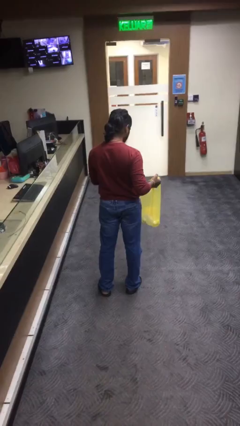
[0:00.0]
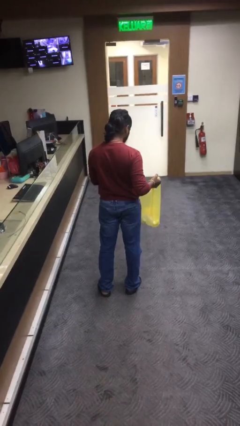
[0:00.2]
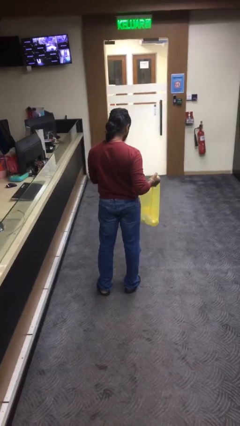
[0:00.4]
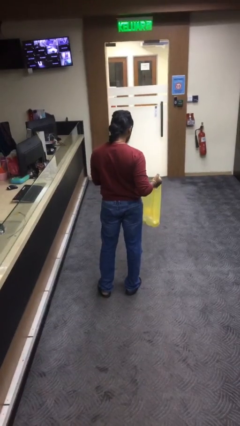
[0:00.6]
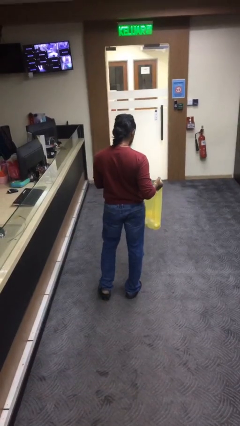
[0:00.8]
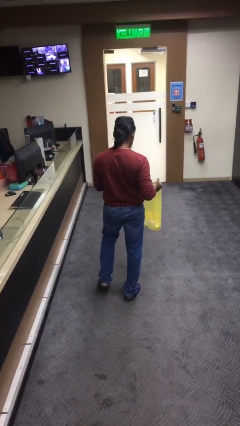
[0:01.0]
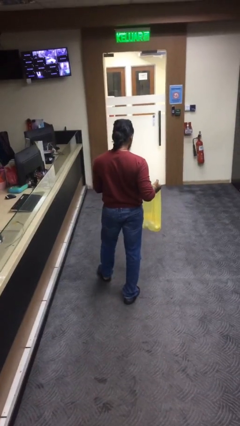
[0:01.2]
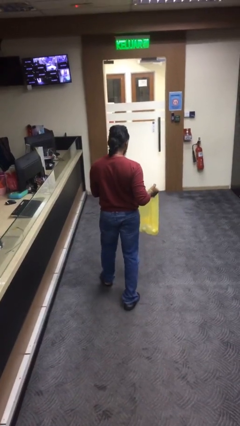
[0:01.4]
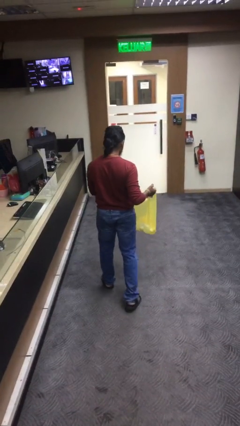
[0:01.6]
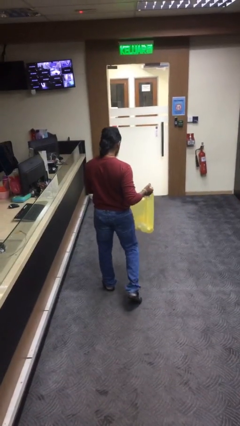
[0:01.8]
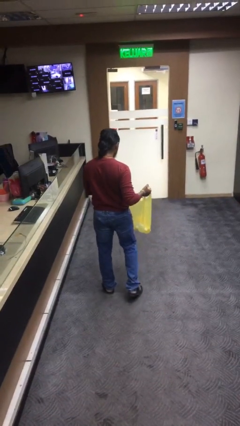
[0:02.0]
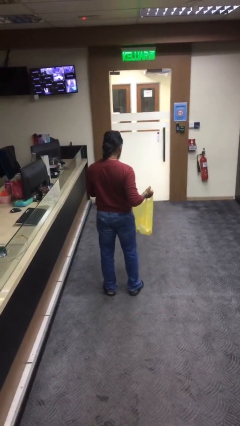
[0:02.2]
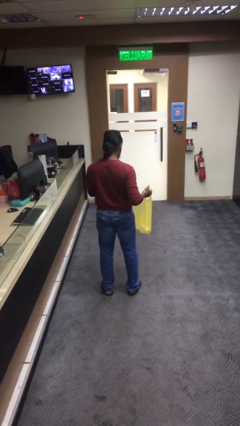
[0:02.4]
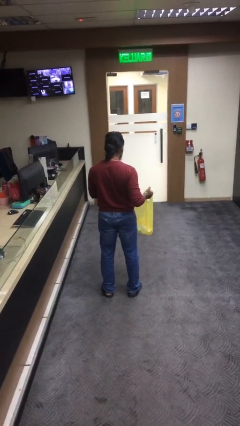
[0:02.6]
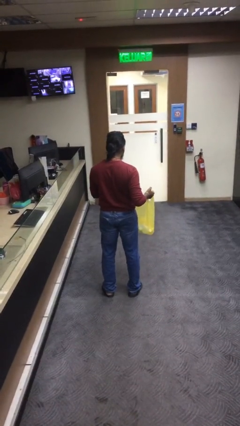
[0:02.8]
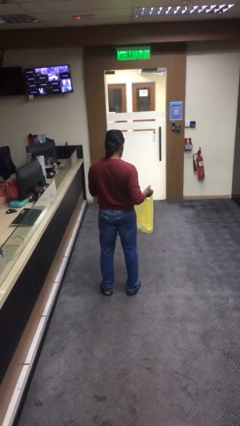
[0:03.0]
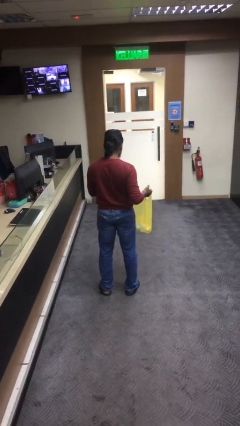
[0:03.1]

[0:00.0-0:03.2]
person carries groceries

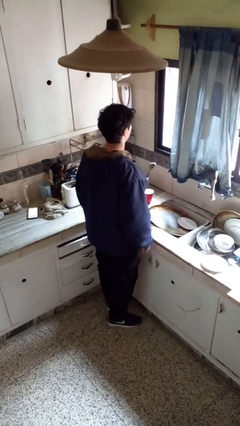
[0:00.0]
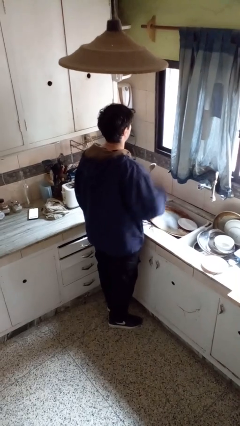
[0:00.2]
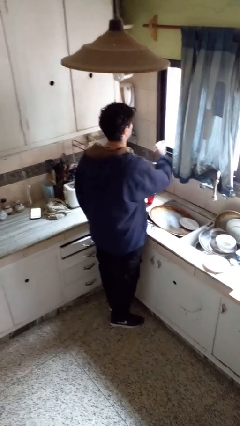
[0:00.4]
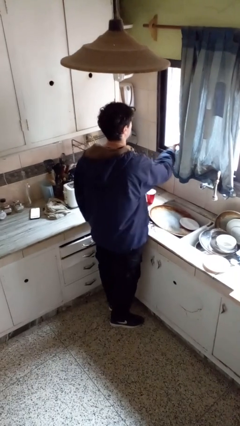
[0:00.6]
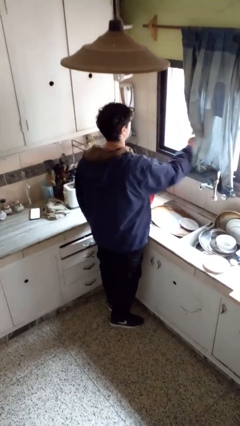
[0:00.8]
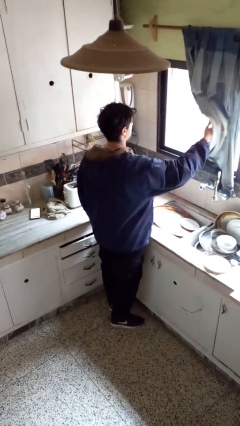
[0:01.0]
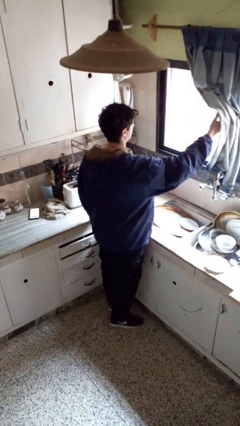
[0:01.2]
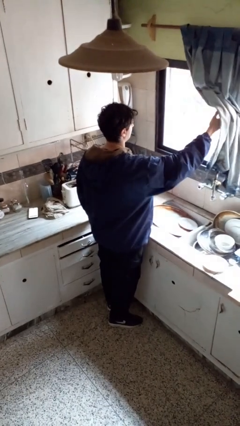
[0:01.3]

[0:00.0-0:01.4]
person opens curtains

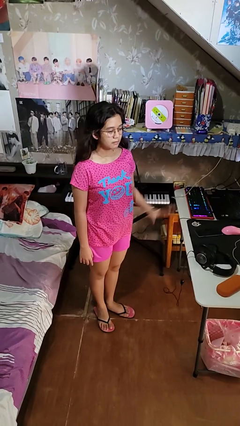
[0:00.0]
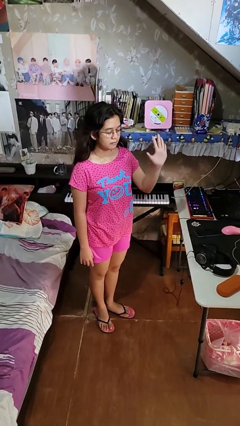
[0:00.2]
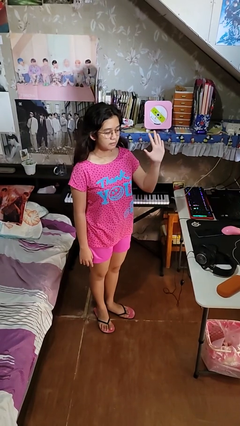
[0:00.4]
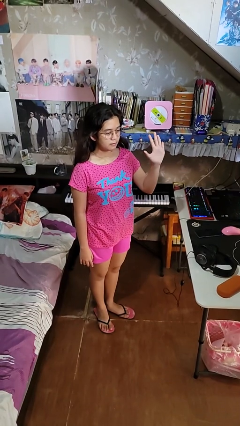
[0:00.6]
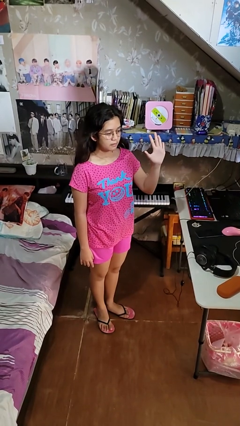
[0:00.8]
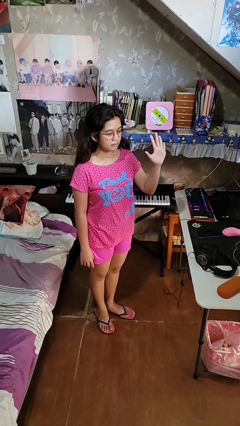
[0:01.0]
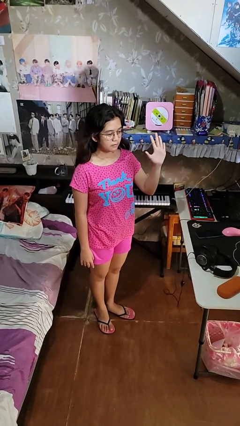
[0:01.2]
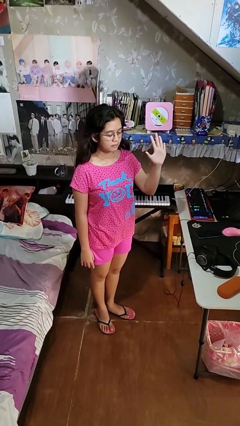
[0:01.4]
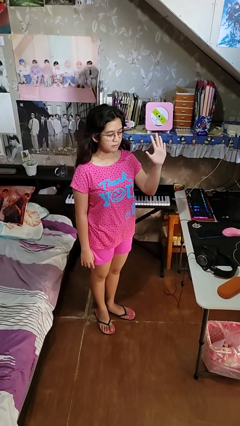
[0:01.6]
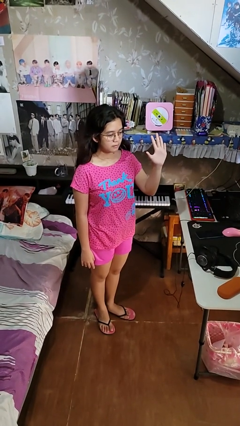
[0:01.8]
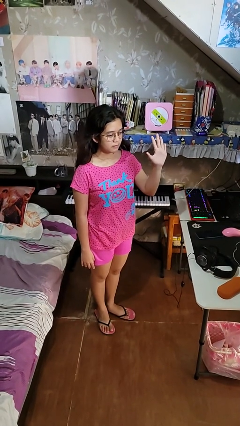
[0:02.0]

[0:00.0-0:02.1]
person gestures number five

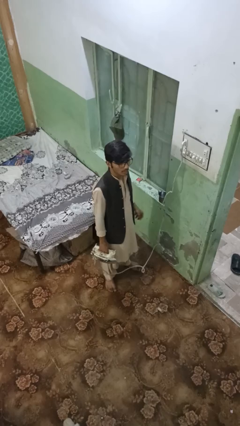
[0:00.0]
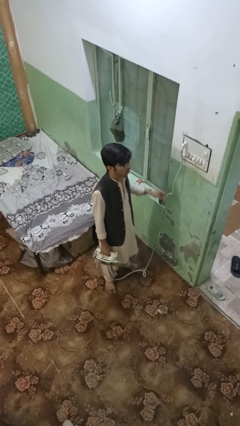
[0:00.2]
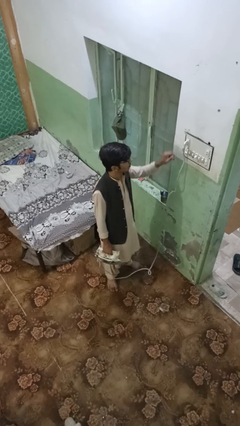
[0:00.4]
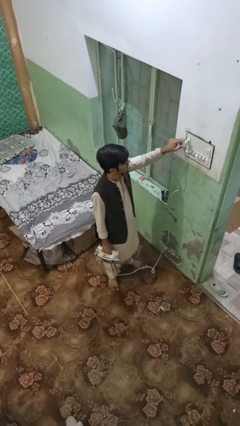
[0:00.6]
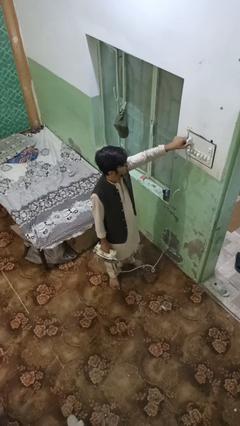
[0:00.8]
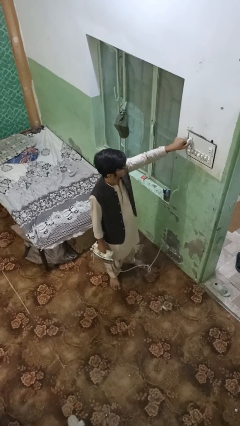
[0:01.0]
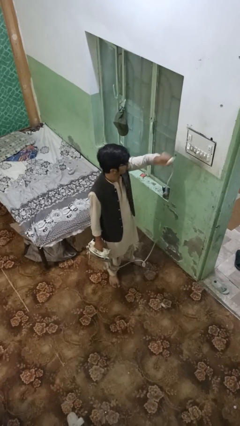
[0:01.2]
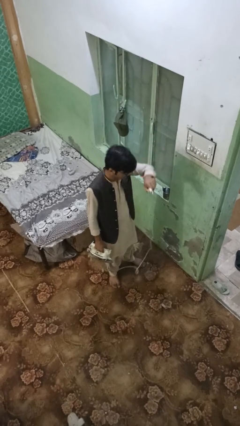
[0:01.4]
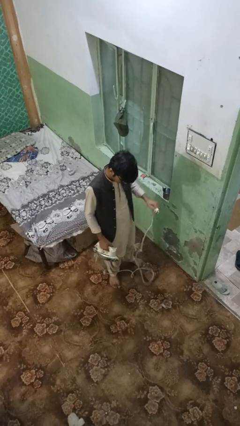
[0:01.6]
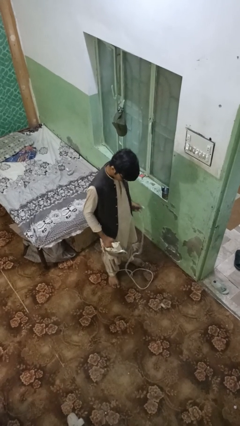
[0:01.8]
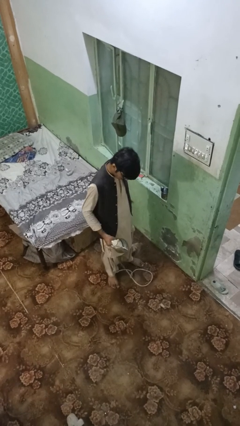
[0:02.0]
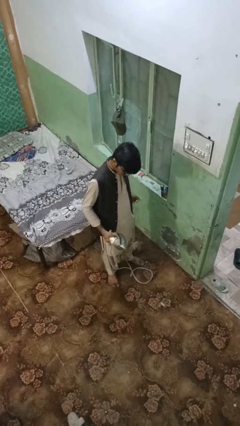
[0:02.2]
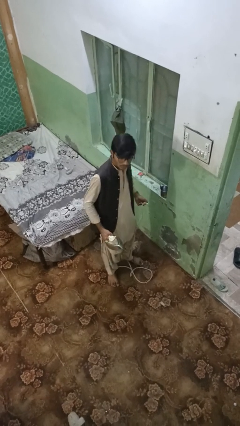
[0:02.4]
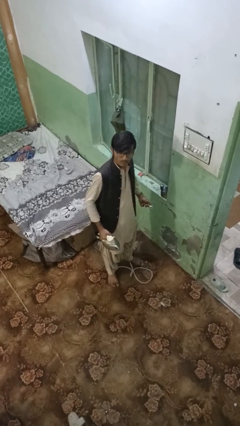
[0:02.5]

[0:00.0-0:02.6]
person unplugs from electrical socket

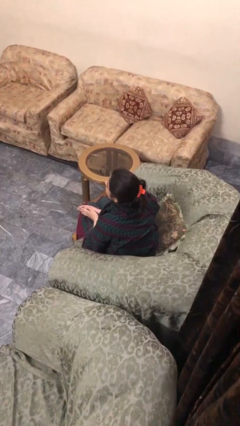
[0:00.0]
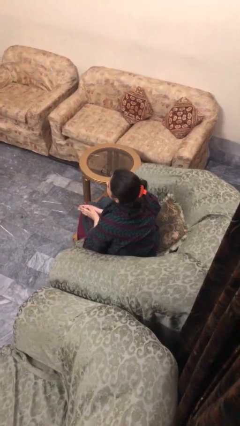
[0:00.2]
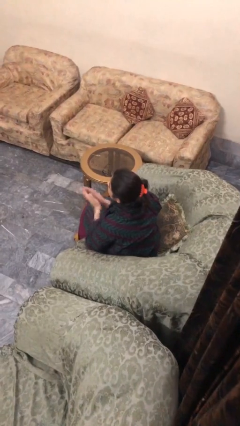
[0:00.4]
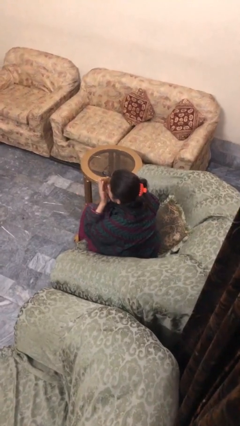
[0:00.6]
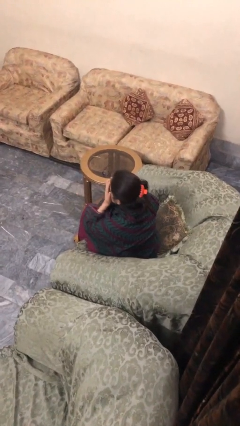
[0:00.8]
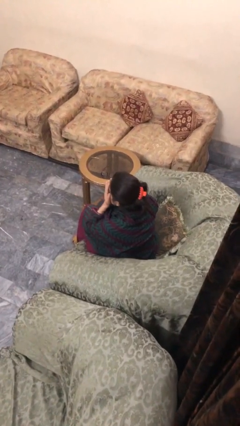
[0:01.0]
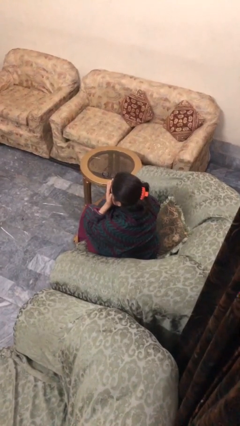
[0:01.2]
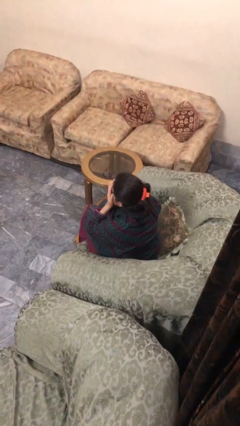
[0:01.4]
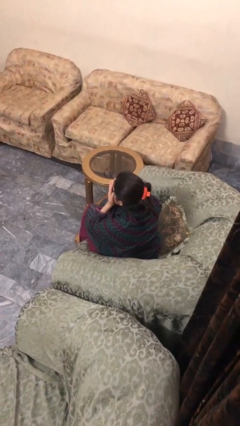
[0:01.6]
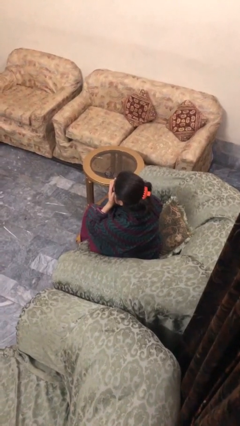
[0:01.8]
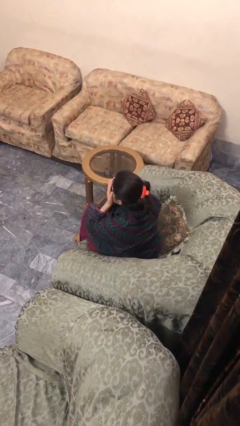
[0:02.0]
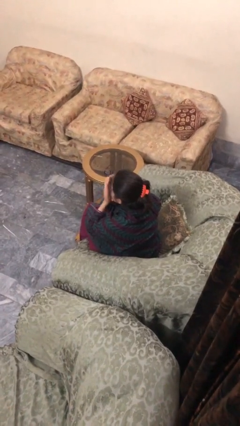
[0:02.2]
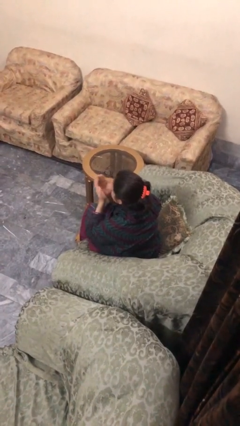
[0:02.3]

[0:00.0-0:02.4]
person covers face with hands

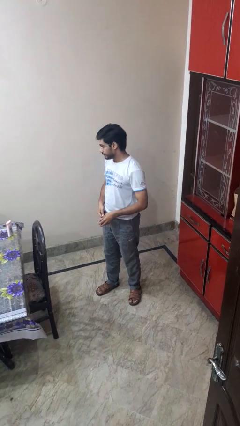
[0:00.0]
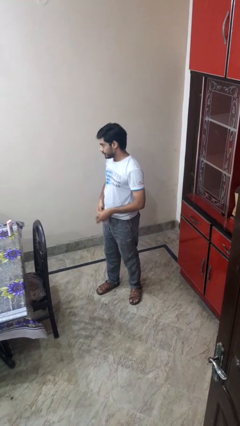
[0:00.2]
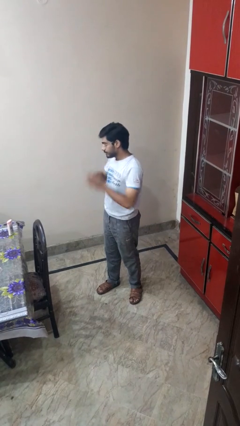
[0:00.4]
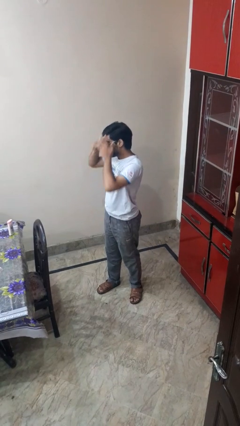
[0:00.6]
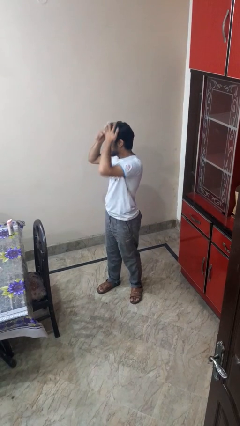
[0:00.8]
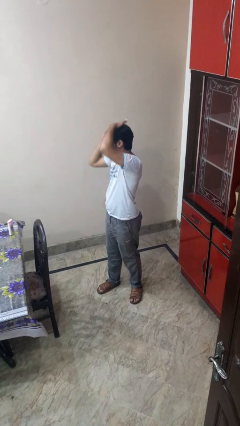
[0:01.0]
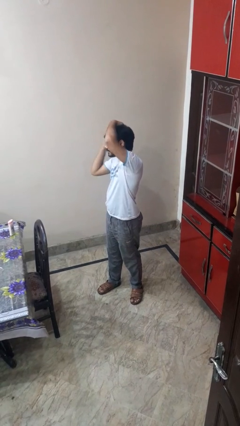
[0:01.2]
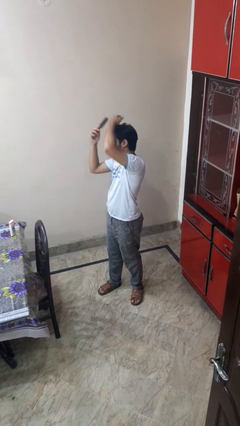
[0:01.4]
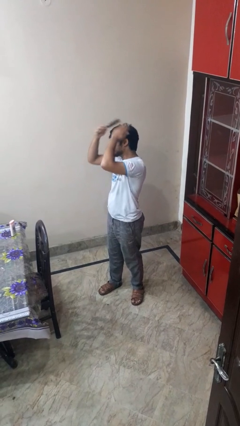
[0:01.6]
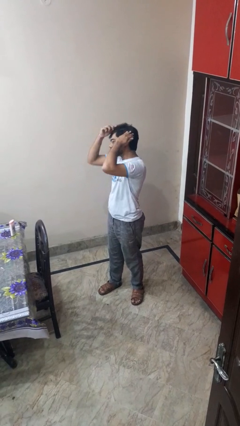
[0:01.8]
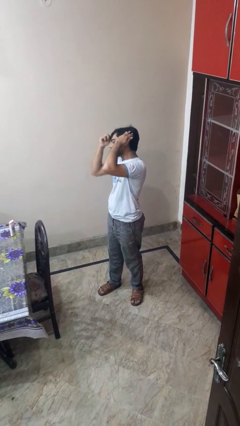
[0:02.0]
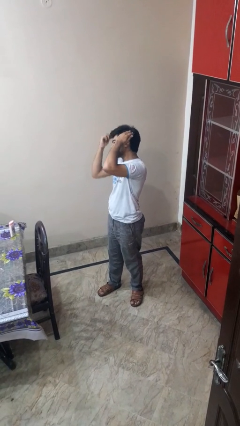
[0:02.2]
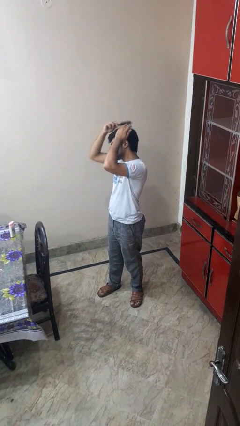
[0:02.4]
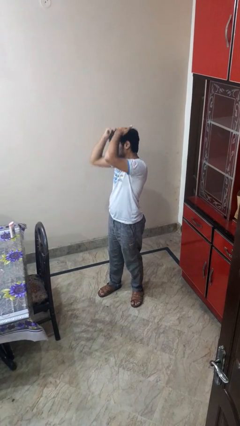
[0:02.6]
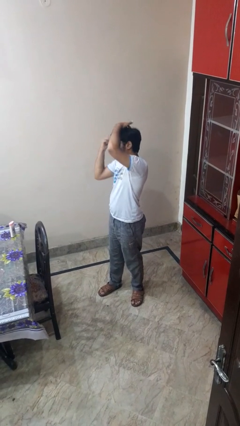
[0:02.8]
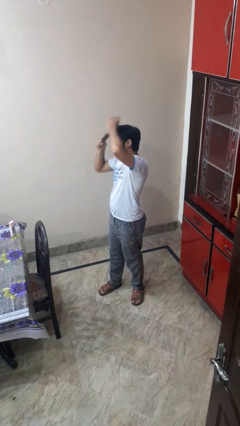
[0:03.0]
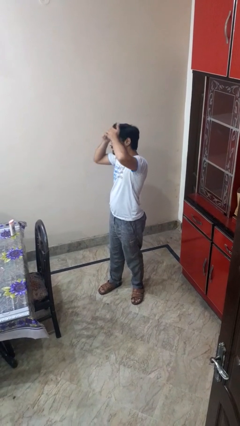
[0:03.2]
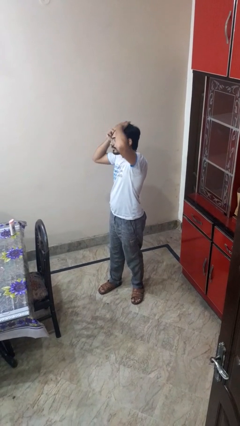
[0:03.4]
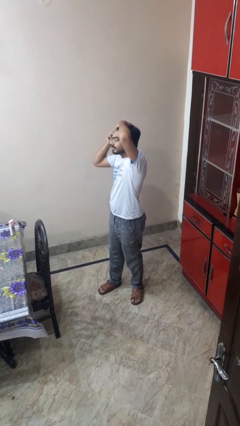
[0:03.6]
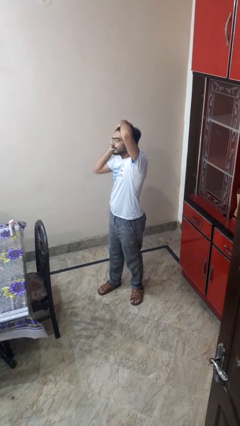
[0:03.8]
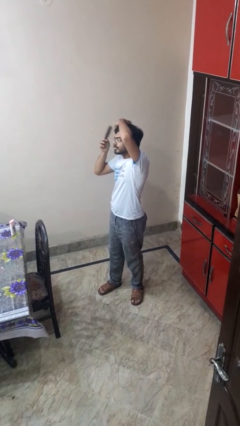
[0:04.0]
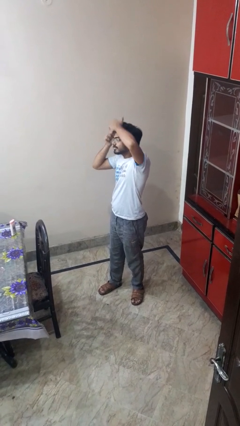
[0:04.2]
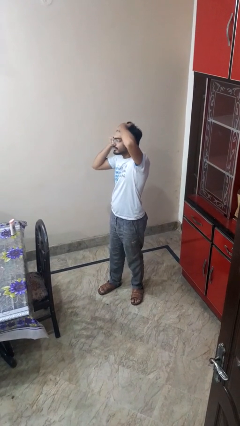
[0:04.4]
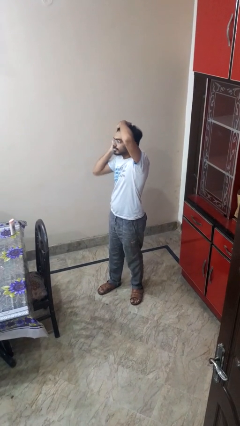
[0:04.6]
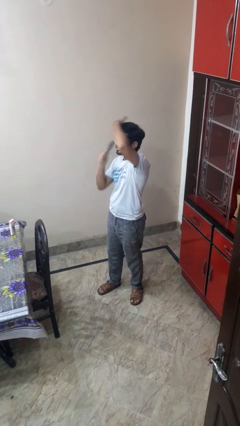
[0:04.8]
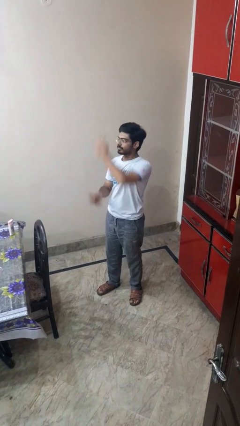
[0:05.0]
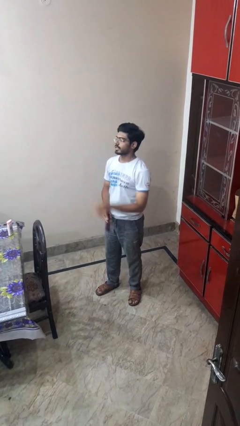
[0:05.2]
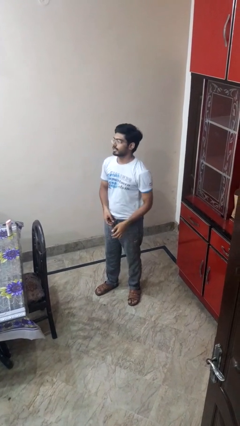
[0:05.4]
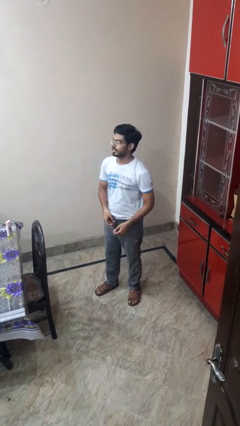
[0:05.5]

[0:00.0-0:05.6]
person brushes hair

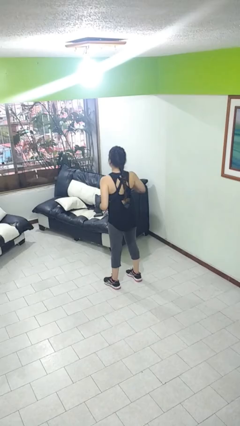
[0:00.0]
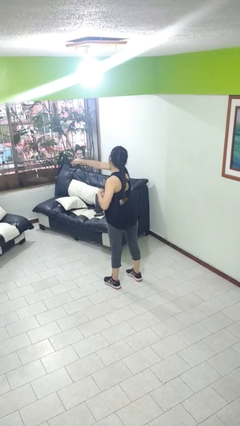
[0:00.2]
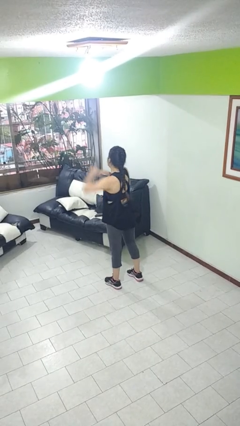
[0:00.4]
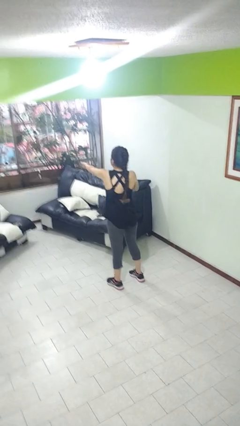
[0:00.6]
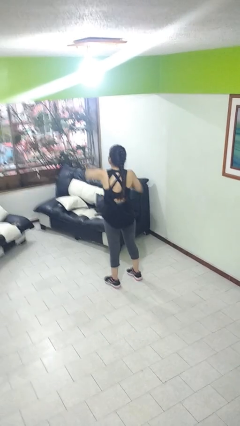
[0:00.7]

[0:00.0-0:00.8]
person punches
